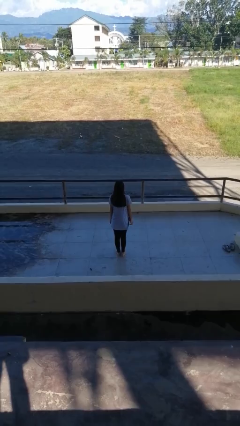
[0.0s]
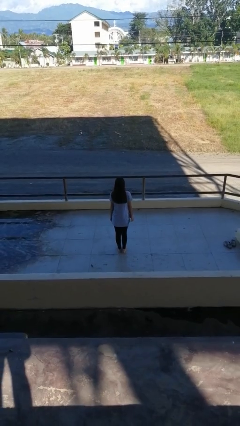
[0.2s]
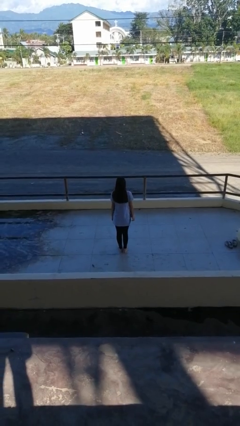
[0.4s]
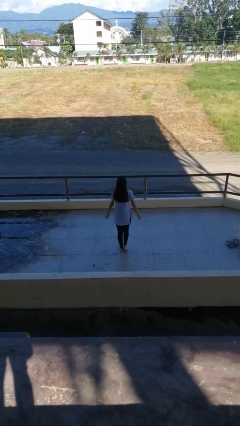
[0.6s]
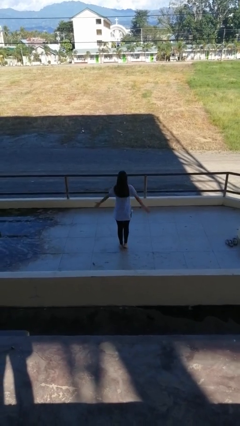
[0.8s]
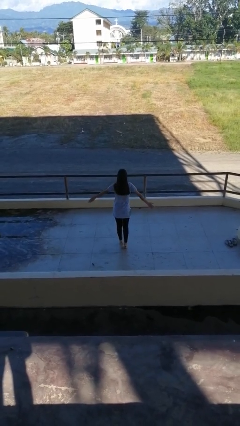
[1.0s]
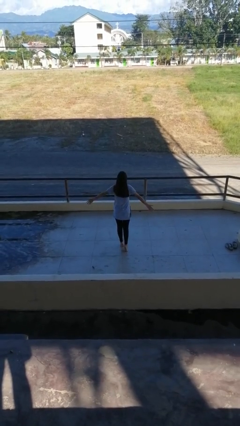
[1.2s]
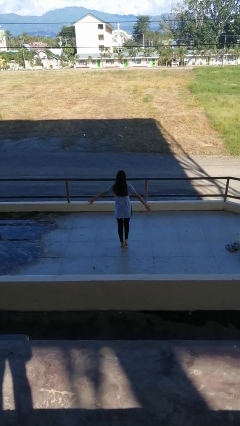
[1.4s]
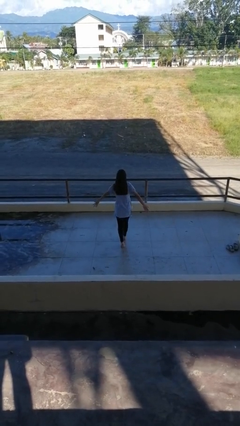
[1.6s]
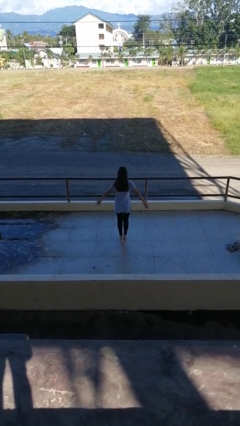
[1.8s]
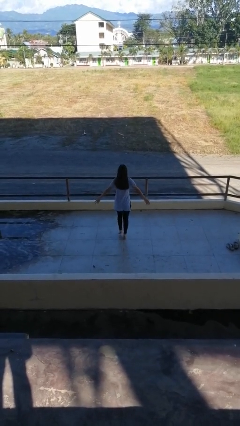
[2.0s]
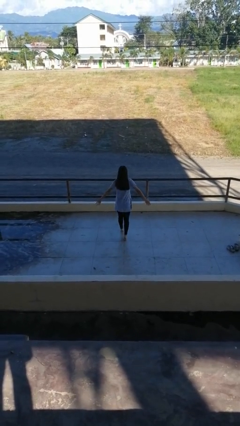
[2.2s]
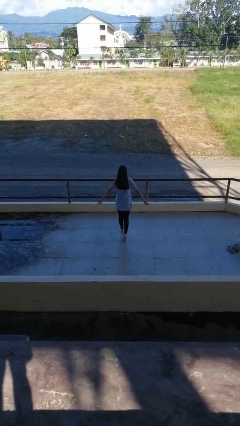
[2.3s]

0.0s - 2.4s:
person walks tiptoe

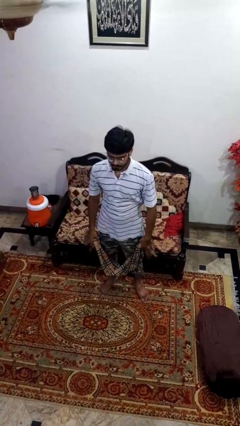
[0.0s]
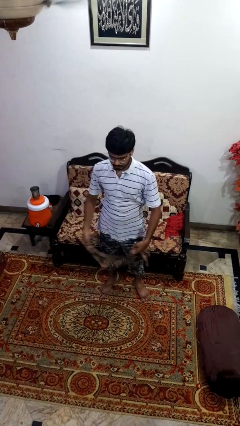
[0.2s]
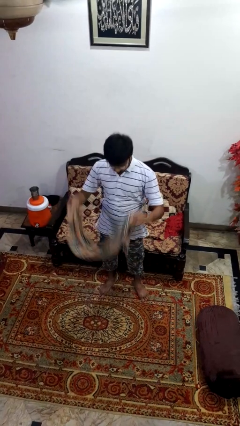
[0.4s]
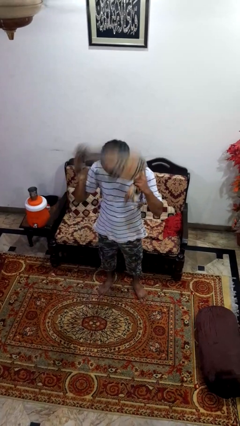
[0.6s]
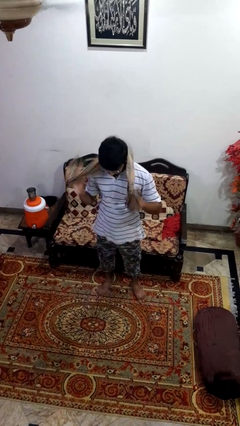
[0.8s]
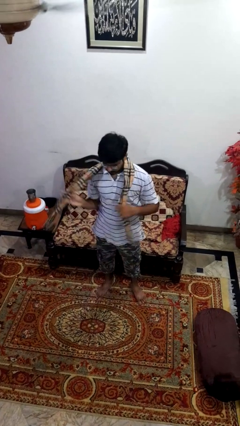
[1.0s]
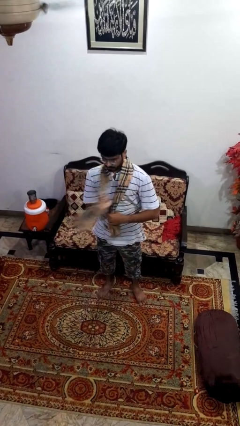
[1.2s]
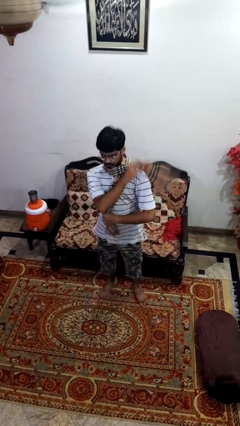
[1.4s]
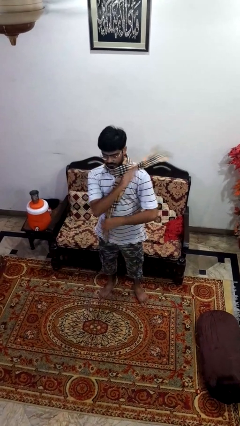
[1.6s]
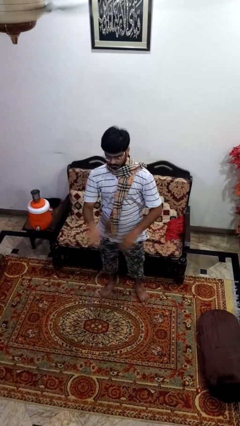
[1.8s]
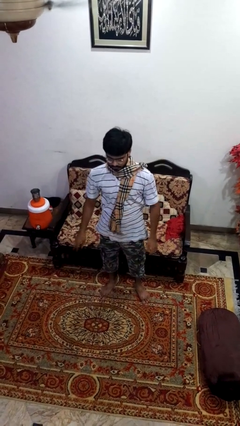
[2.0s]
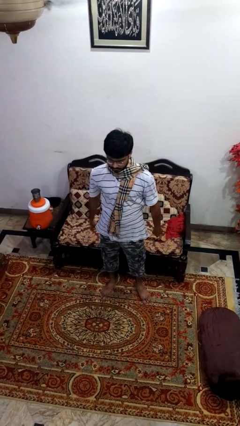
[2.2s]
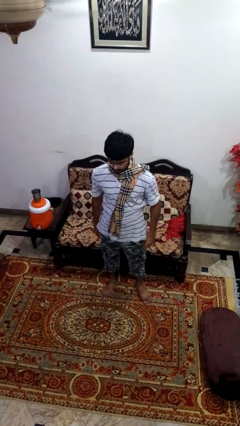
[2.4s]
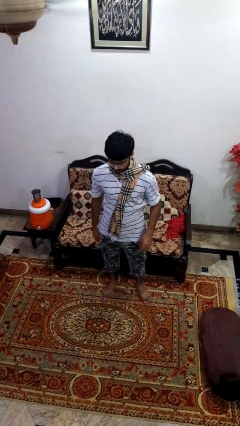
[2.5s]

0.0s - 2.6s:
person puts on scarf

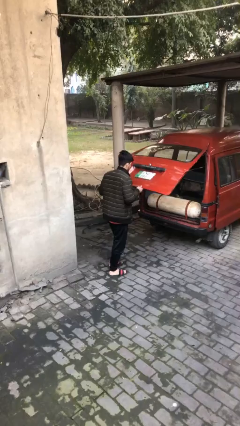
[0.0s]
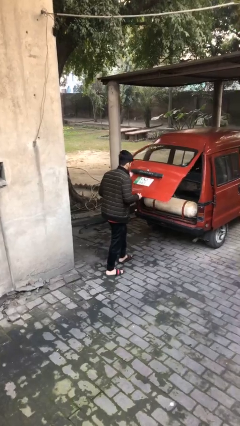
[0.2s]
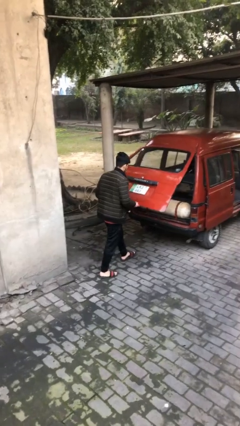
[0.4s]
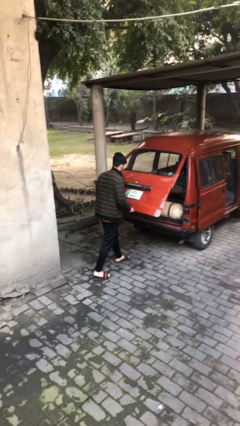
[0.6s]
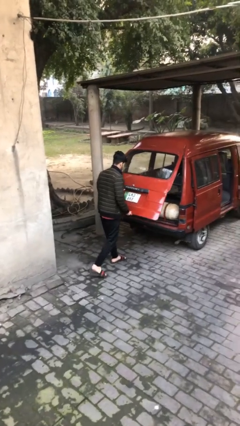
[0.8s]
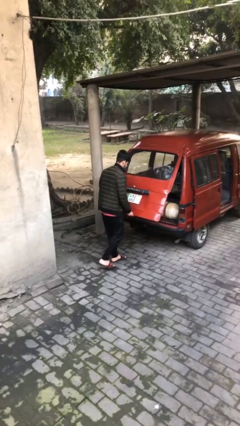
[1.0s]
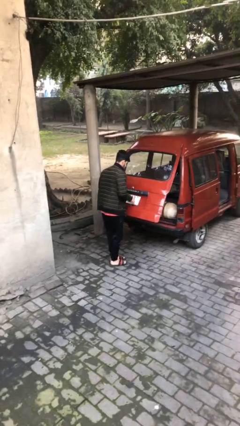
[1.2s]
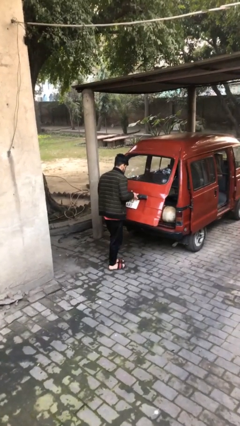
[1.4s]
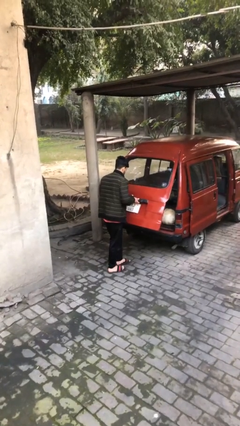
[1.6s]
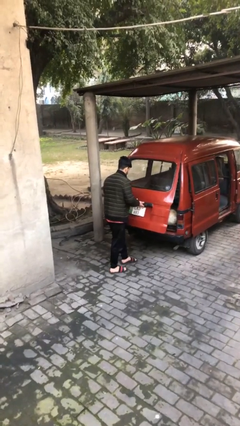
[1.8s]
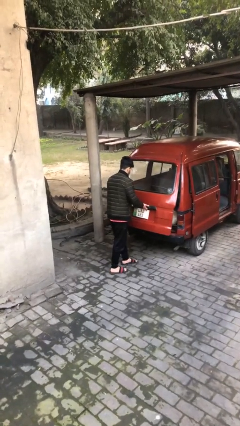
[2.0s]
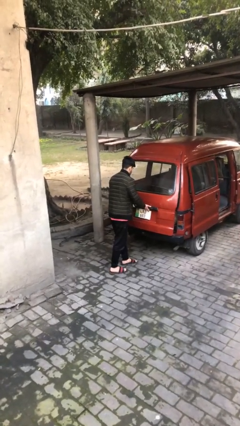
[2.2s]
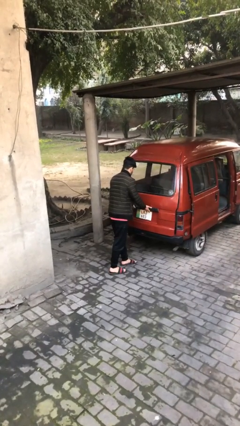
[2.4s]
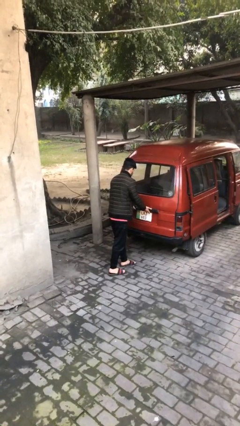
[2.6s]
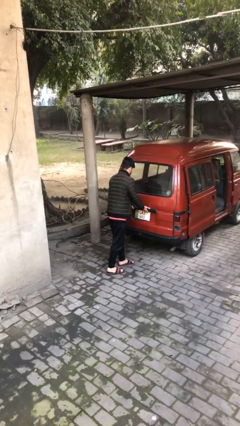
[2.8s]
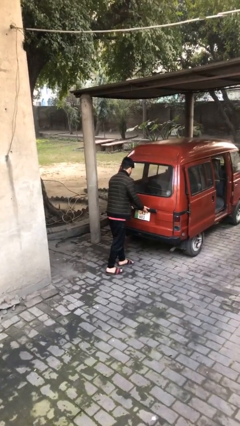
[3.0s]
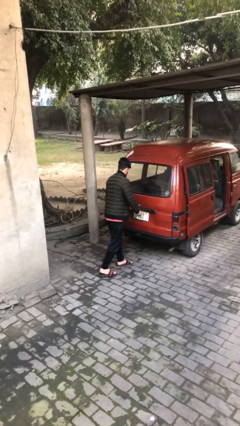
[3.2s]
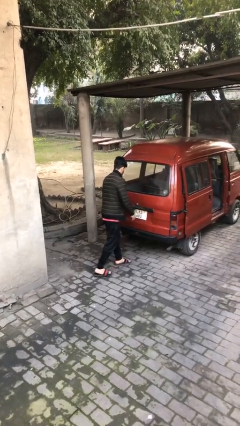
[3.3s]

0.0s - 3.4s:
person closes car trunk

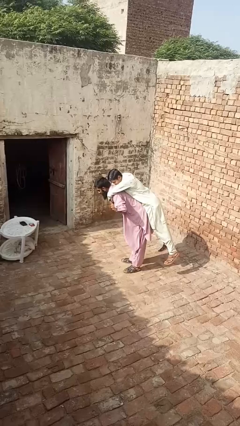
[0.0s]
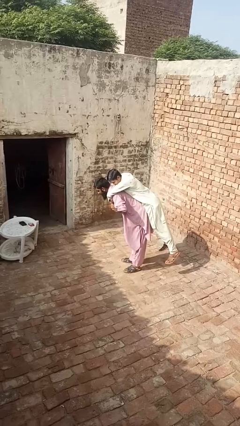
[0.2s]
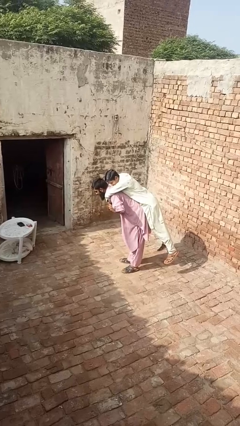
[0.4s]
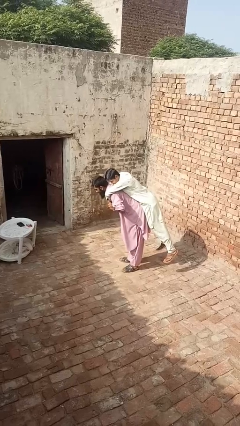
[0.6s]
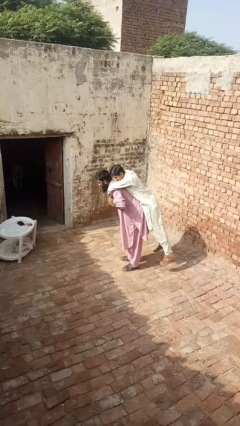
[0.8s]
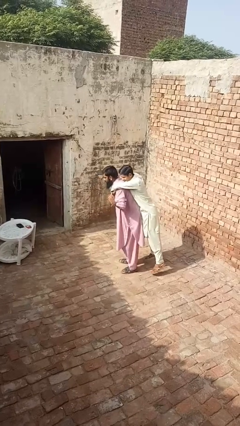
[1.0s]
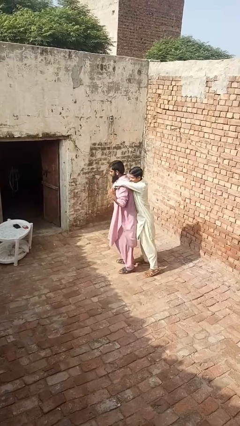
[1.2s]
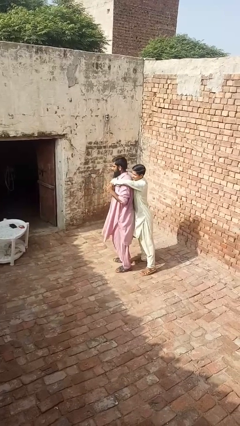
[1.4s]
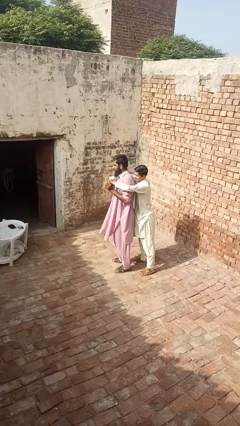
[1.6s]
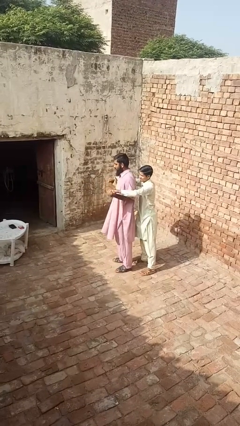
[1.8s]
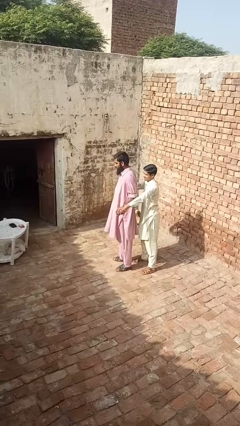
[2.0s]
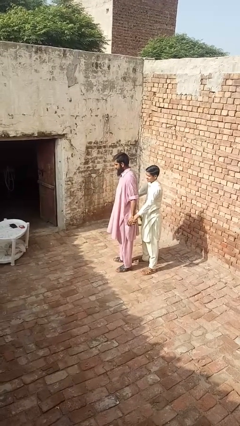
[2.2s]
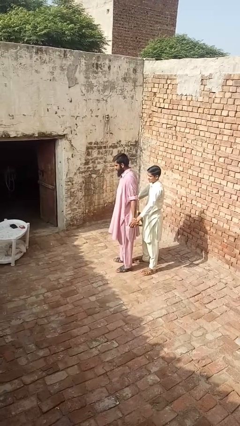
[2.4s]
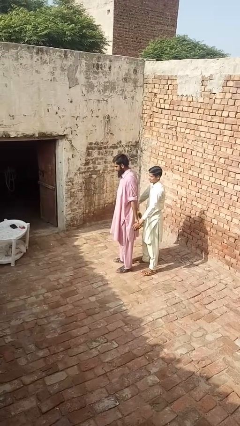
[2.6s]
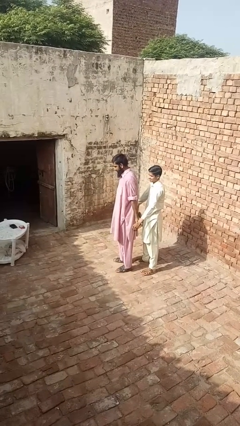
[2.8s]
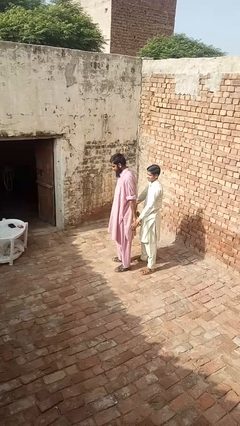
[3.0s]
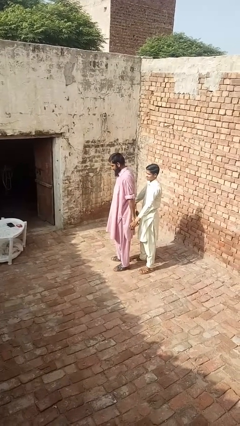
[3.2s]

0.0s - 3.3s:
person puts down person

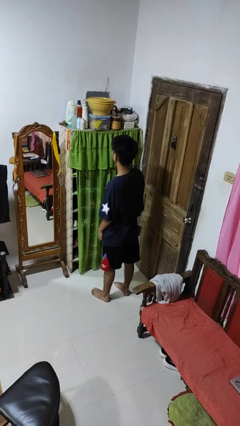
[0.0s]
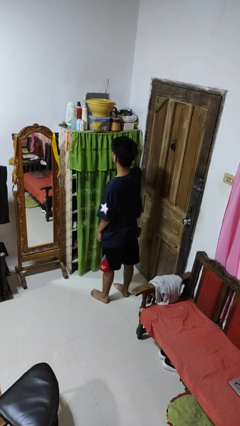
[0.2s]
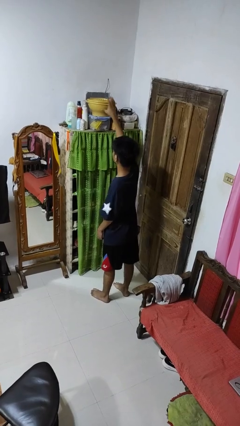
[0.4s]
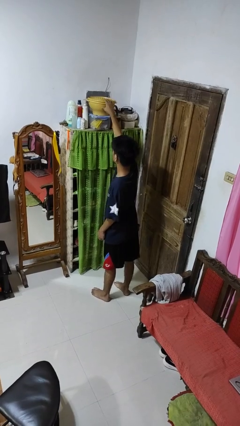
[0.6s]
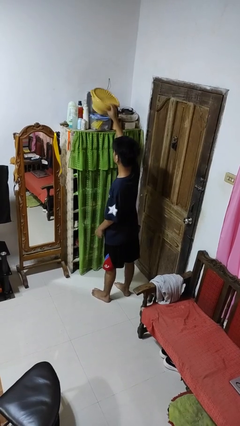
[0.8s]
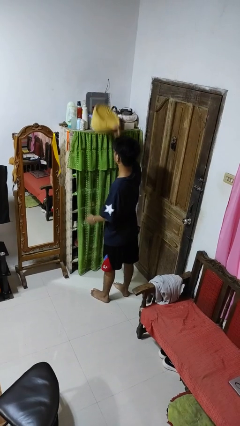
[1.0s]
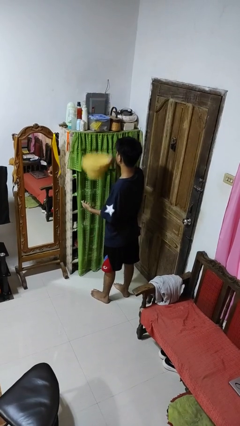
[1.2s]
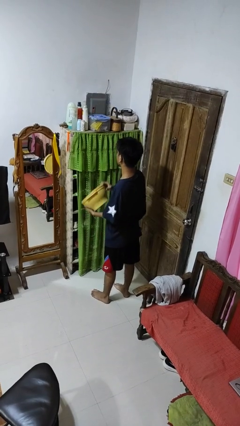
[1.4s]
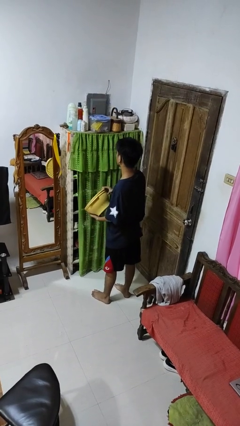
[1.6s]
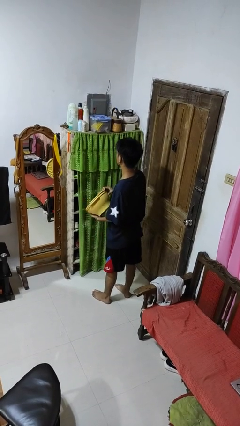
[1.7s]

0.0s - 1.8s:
person picks up object from shelf

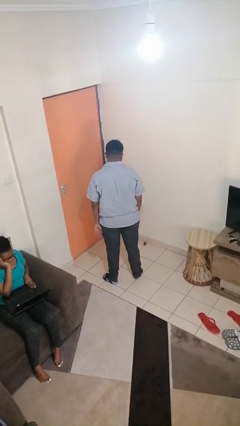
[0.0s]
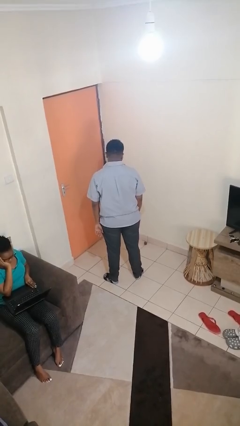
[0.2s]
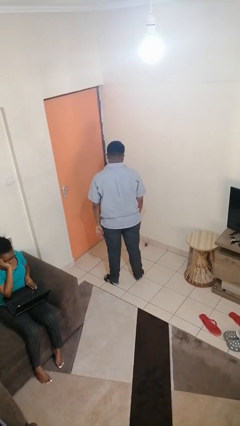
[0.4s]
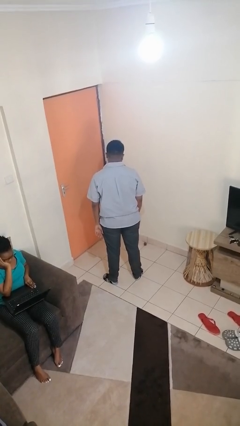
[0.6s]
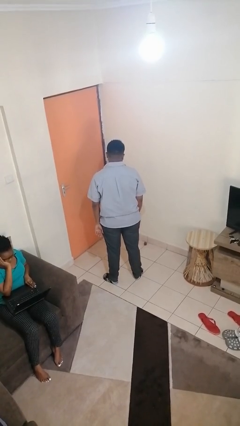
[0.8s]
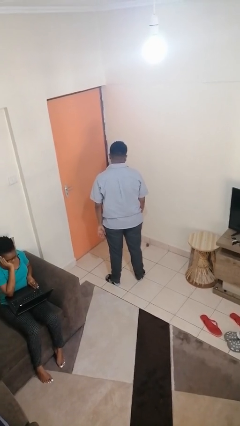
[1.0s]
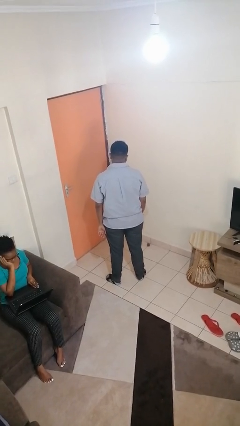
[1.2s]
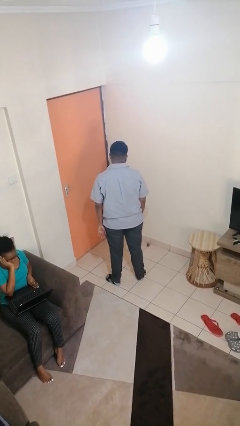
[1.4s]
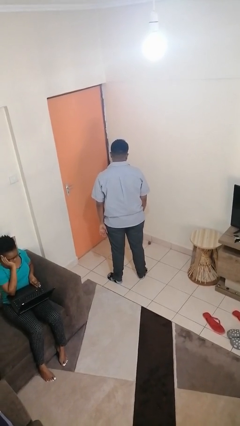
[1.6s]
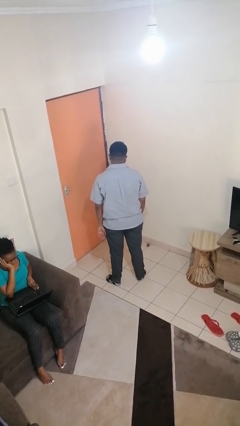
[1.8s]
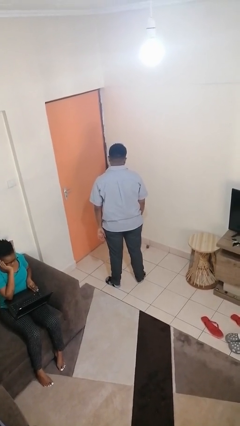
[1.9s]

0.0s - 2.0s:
person exercises with jumping jacks

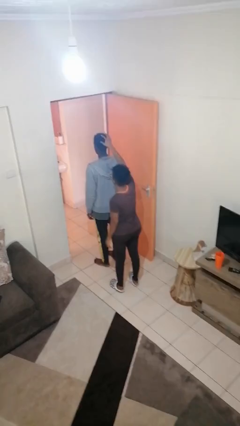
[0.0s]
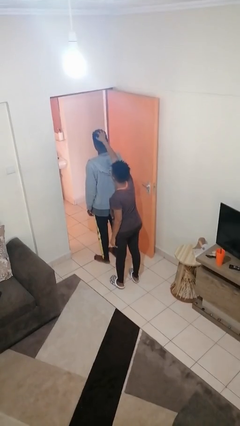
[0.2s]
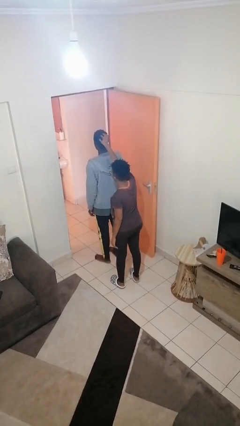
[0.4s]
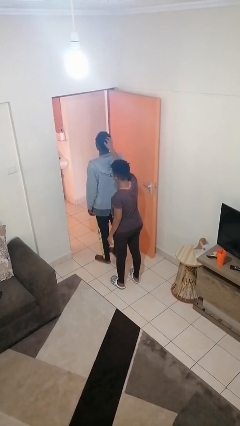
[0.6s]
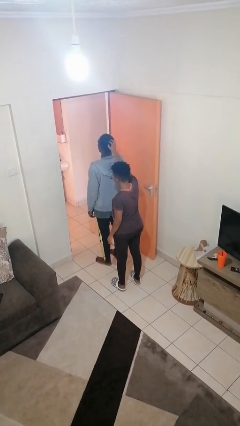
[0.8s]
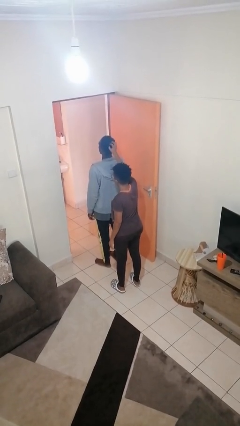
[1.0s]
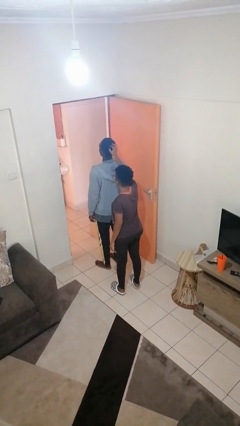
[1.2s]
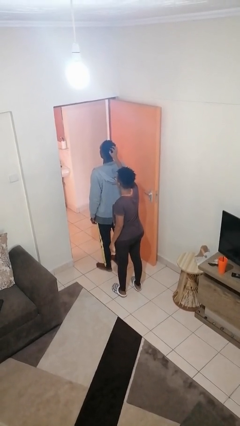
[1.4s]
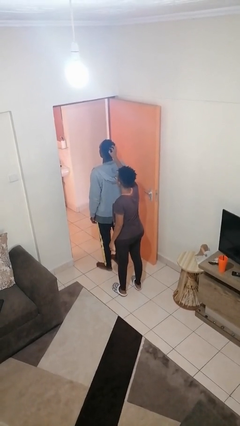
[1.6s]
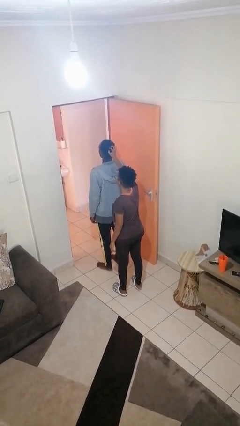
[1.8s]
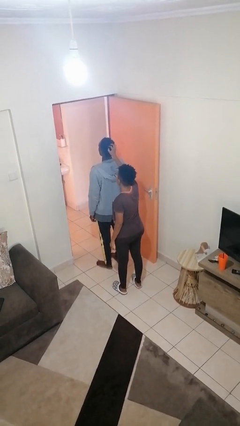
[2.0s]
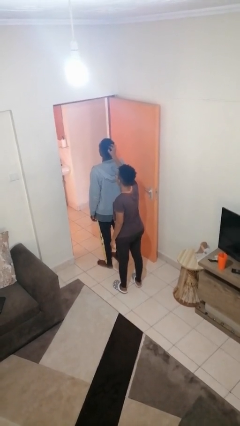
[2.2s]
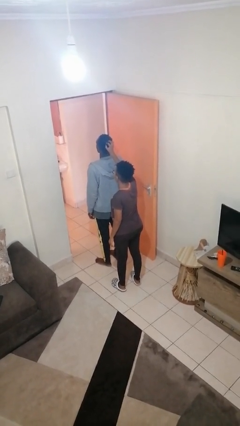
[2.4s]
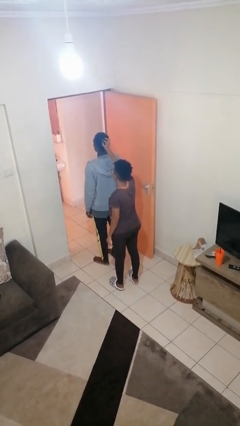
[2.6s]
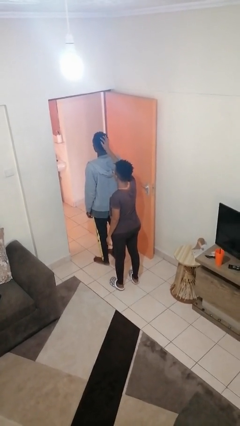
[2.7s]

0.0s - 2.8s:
person grabs person by hair
